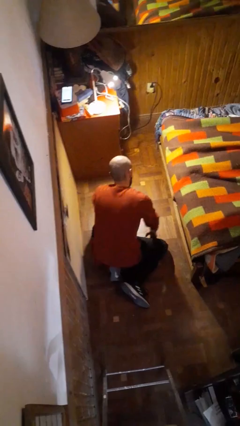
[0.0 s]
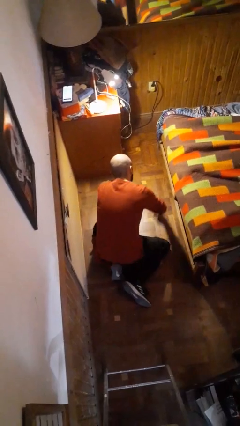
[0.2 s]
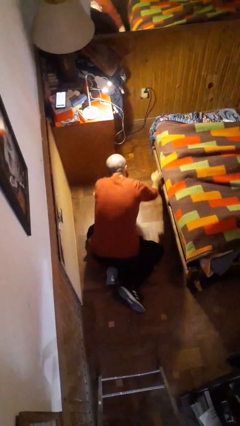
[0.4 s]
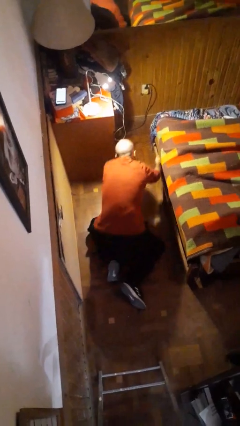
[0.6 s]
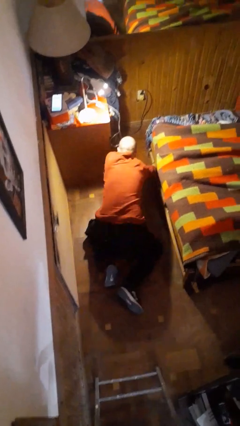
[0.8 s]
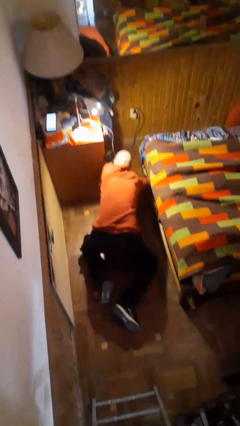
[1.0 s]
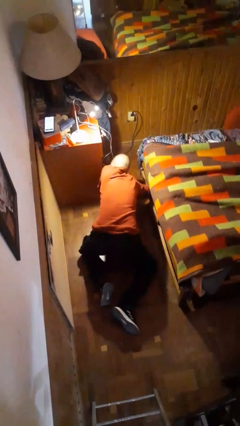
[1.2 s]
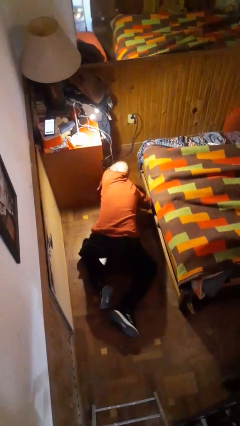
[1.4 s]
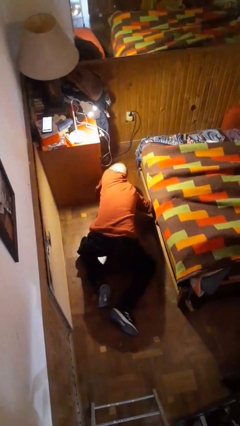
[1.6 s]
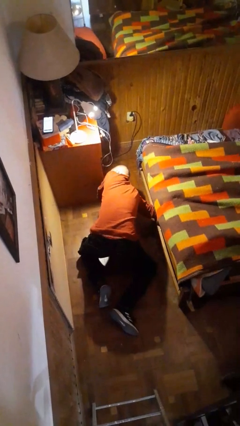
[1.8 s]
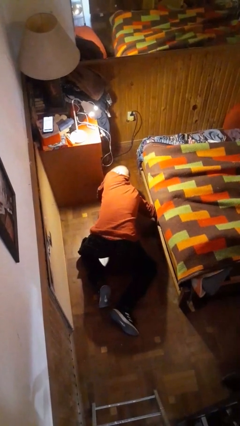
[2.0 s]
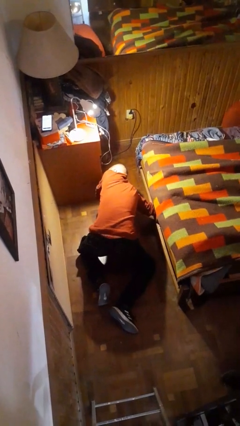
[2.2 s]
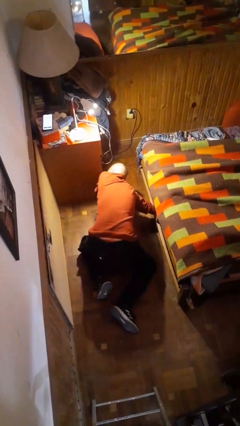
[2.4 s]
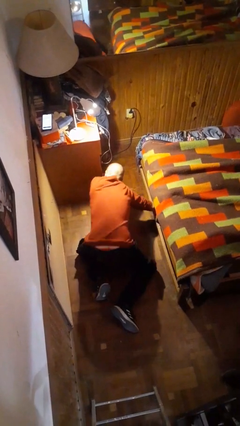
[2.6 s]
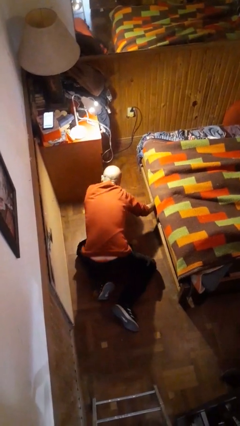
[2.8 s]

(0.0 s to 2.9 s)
person searches under bed

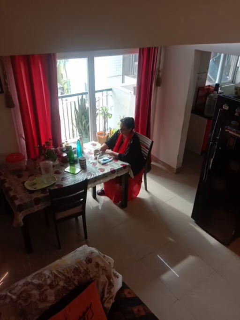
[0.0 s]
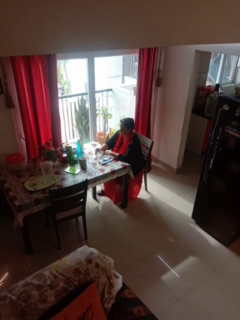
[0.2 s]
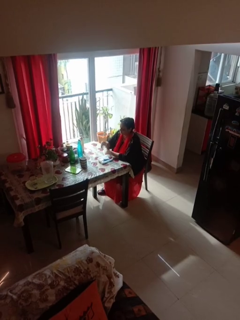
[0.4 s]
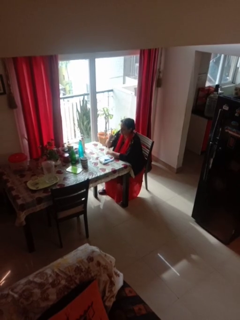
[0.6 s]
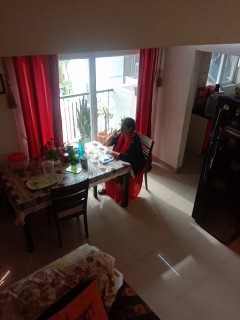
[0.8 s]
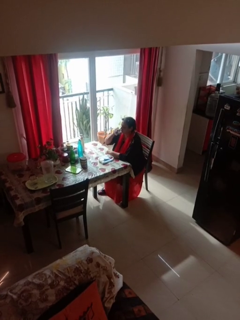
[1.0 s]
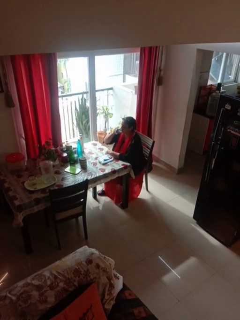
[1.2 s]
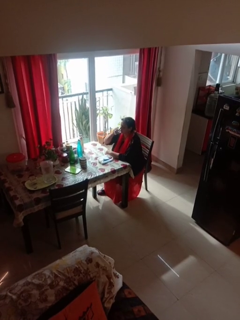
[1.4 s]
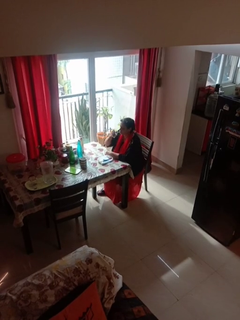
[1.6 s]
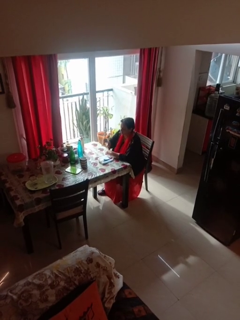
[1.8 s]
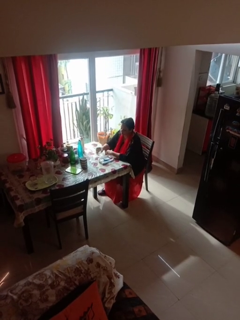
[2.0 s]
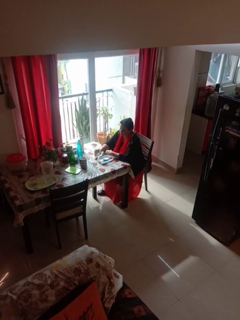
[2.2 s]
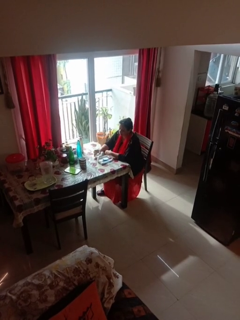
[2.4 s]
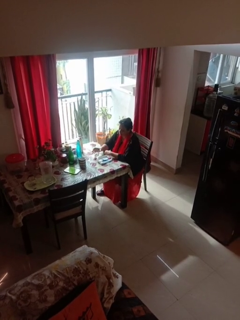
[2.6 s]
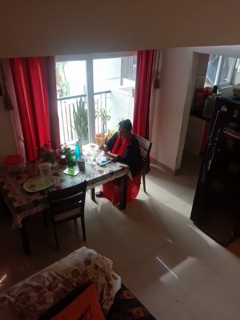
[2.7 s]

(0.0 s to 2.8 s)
person drinks from cup

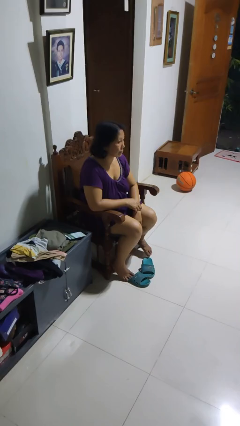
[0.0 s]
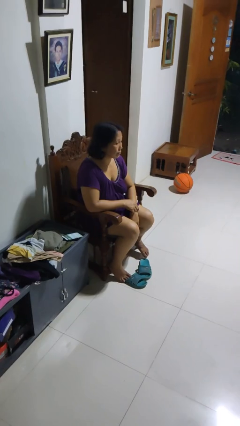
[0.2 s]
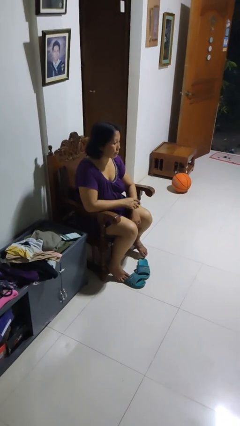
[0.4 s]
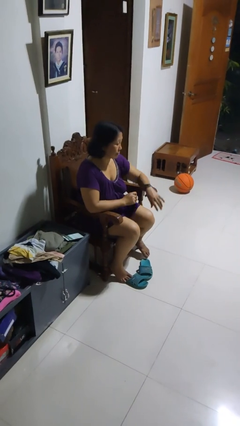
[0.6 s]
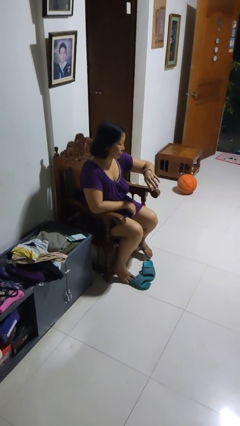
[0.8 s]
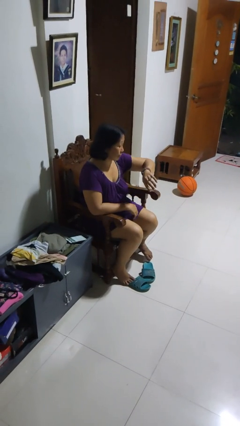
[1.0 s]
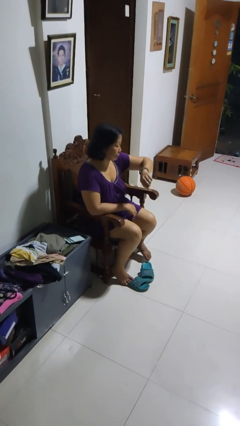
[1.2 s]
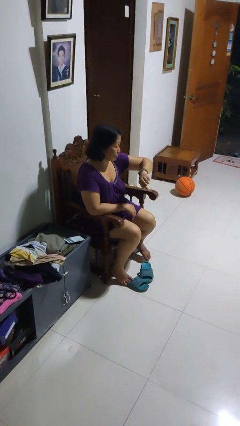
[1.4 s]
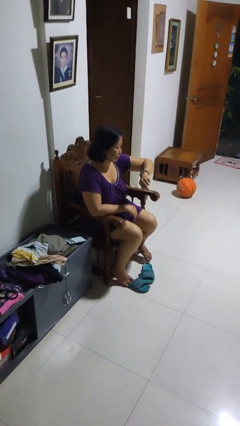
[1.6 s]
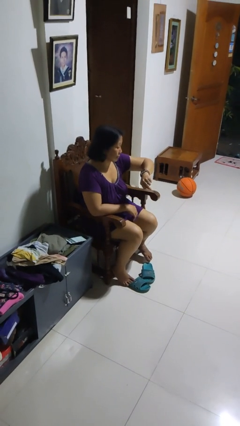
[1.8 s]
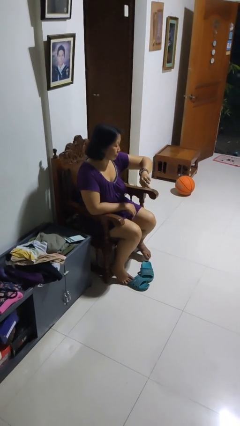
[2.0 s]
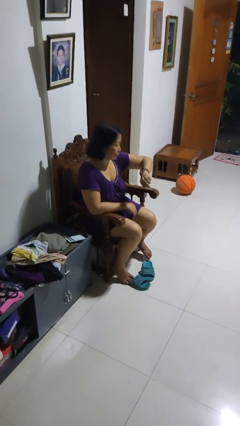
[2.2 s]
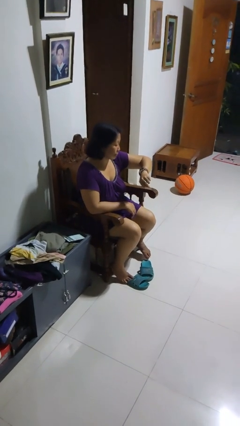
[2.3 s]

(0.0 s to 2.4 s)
person looks at wristwatch

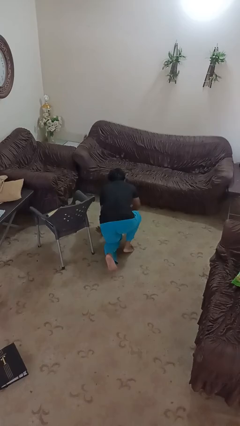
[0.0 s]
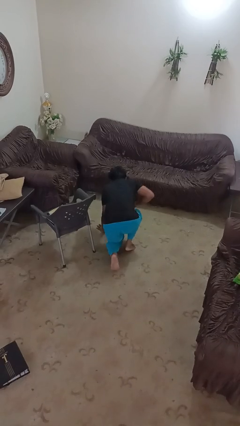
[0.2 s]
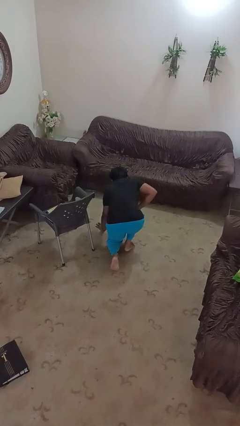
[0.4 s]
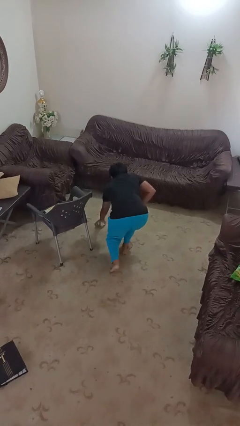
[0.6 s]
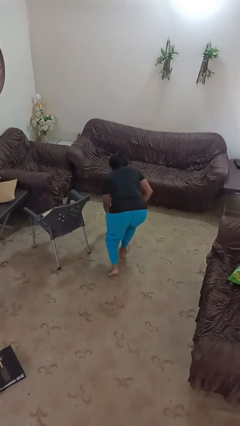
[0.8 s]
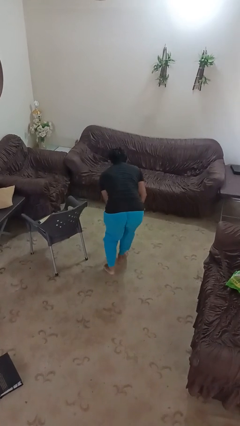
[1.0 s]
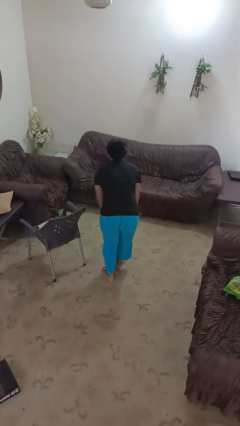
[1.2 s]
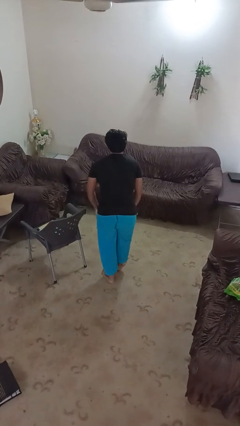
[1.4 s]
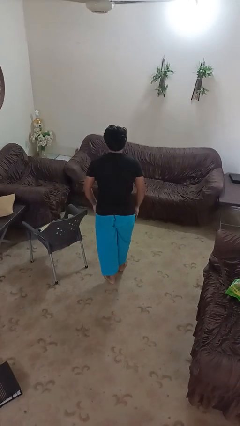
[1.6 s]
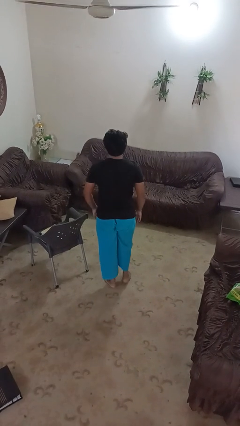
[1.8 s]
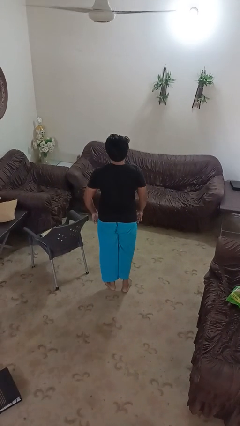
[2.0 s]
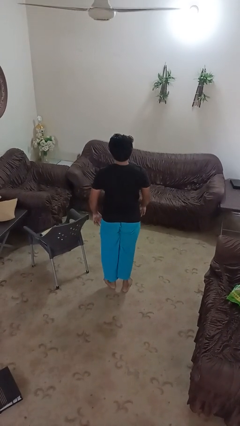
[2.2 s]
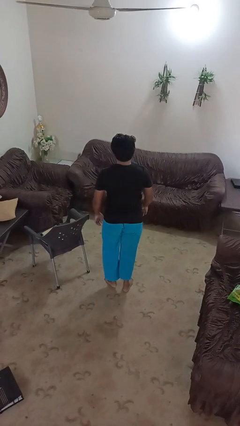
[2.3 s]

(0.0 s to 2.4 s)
person stands up from floor

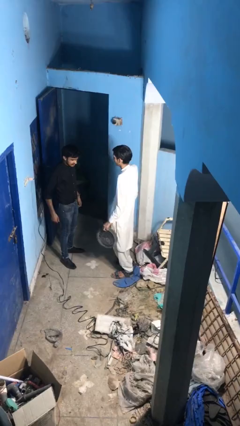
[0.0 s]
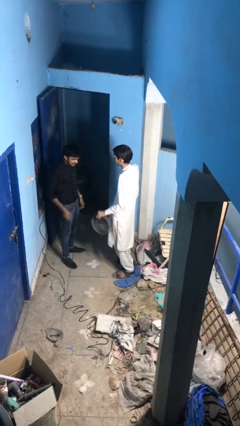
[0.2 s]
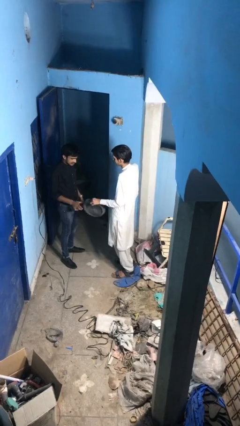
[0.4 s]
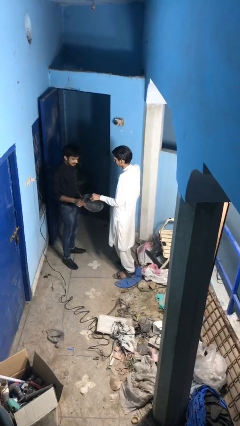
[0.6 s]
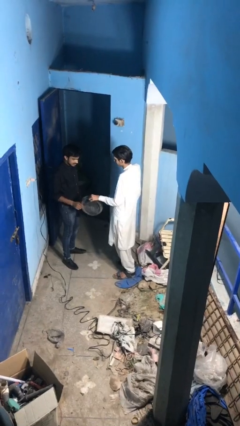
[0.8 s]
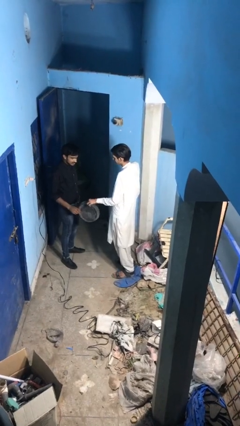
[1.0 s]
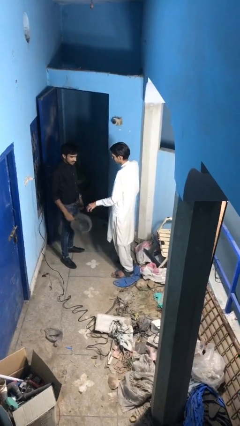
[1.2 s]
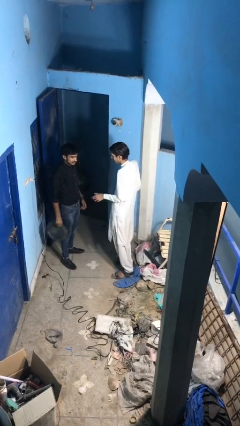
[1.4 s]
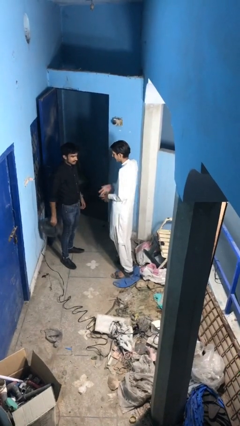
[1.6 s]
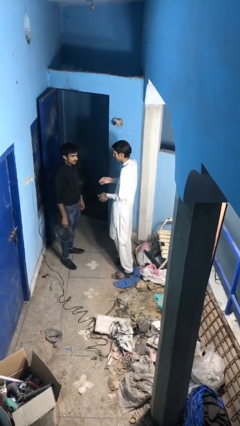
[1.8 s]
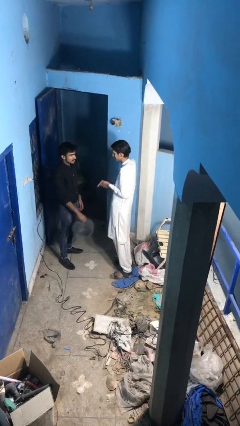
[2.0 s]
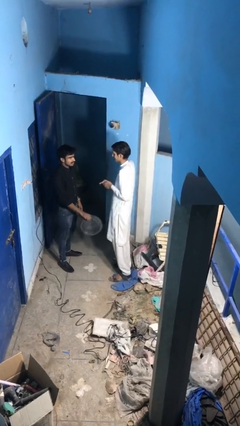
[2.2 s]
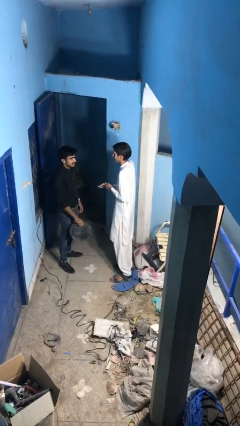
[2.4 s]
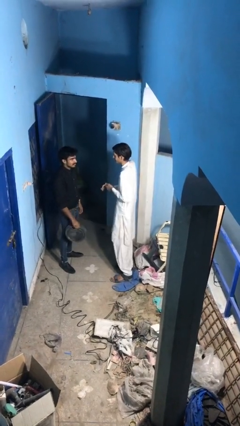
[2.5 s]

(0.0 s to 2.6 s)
person transfers object to person

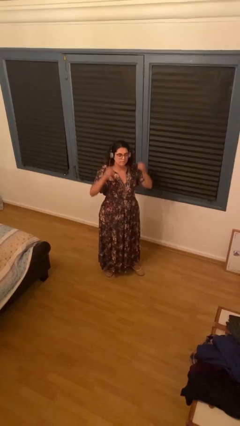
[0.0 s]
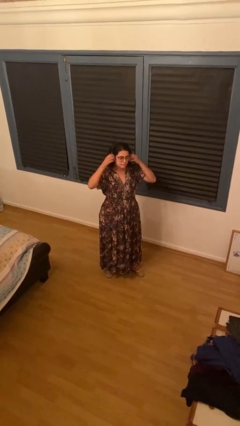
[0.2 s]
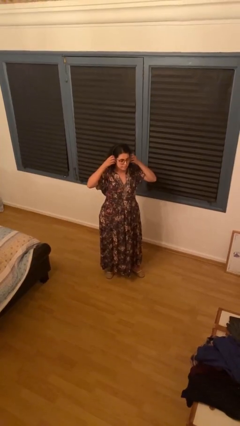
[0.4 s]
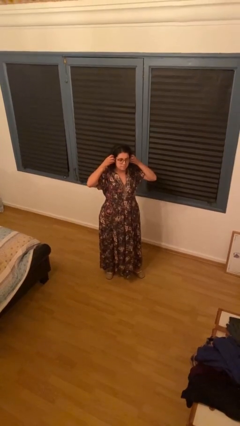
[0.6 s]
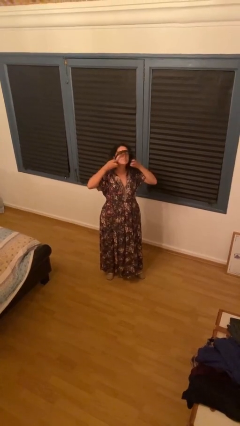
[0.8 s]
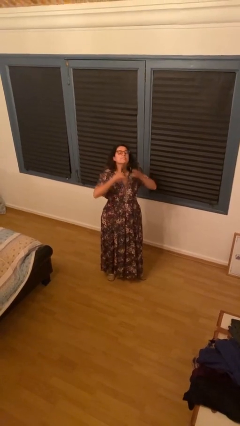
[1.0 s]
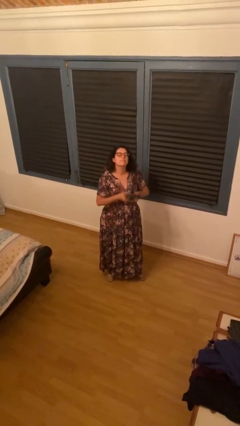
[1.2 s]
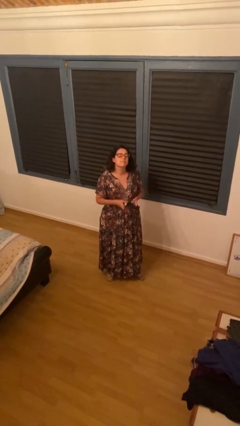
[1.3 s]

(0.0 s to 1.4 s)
person takes off headphones

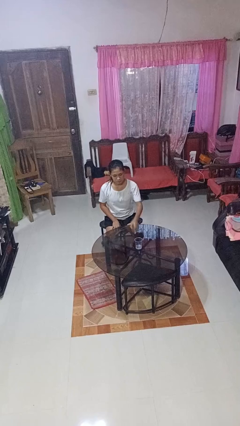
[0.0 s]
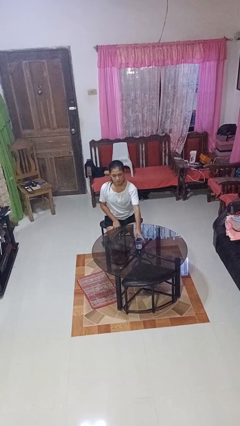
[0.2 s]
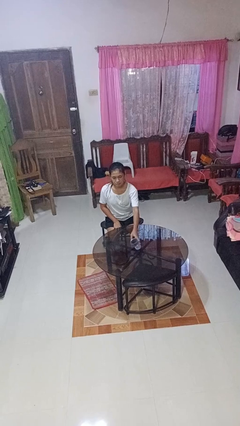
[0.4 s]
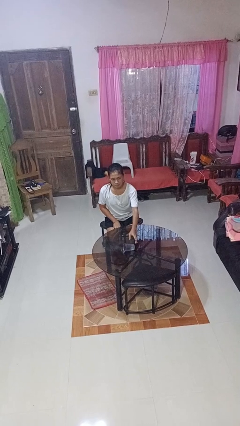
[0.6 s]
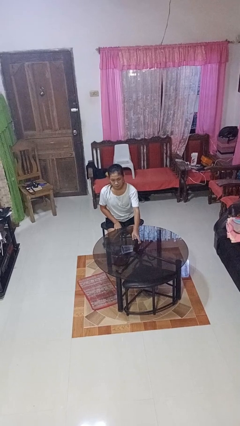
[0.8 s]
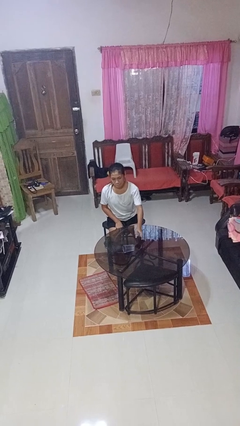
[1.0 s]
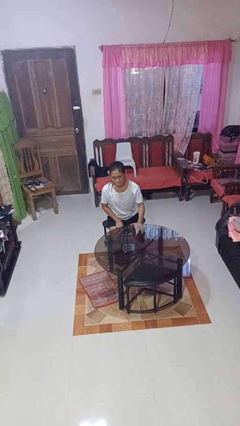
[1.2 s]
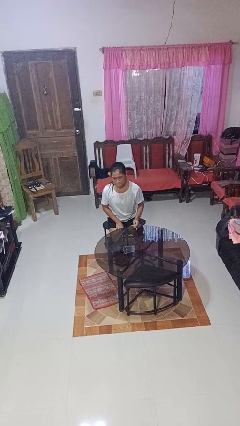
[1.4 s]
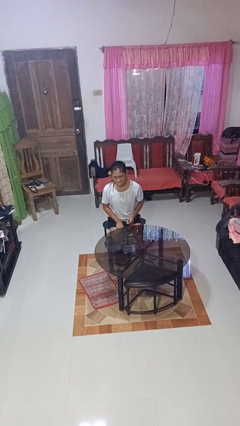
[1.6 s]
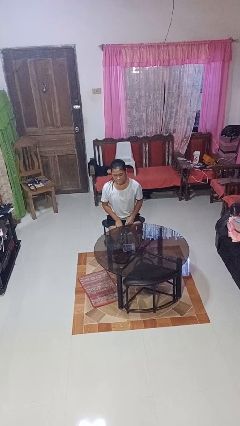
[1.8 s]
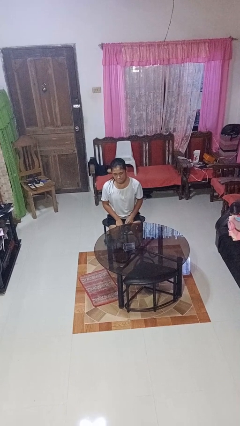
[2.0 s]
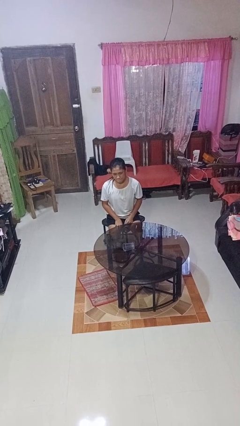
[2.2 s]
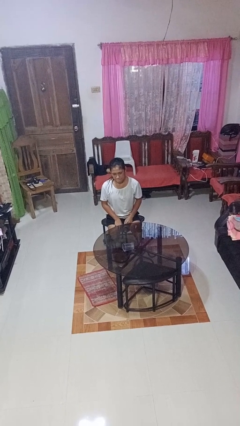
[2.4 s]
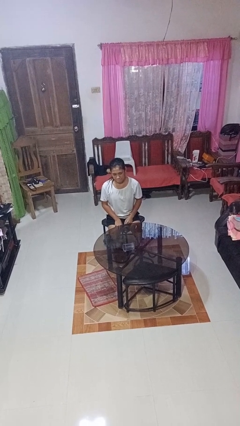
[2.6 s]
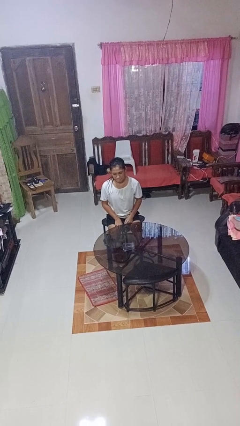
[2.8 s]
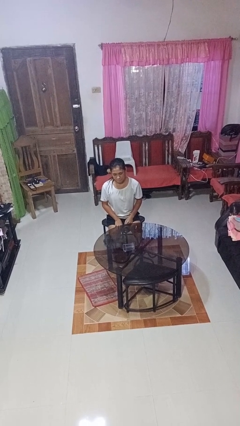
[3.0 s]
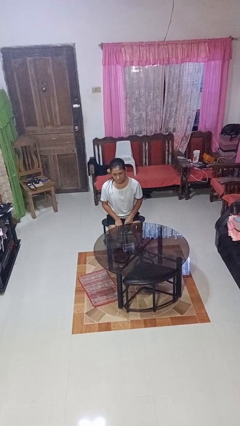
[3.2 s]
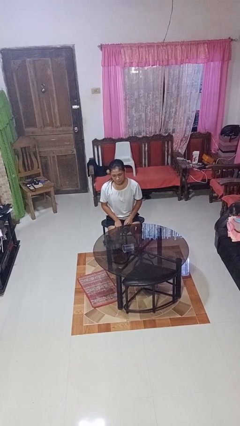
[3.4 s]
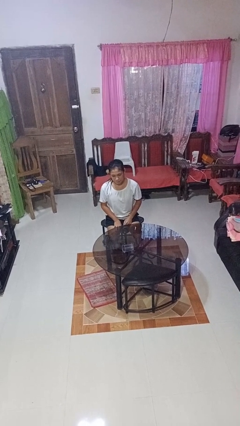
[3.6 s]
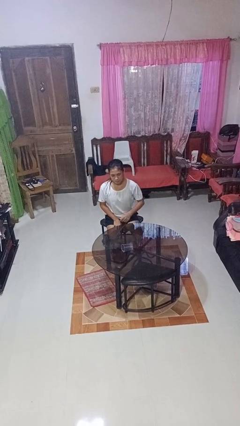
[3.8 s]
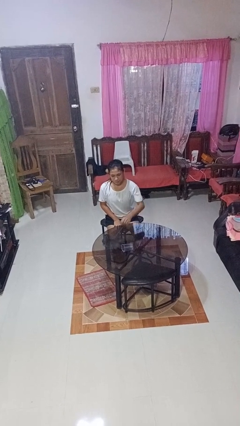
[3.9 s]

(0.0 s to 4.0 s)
person spills on table
